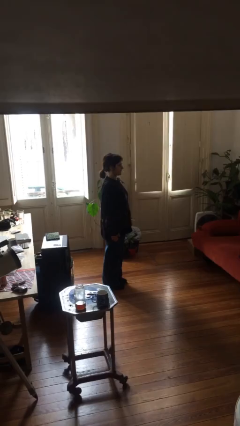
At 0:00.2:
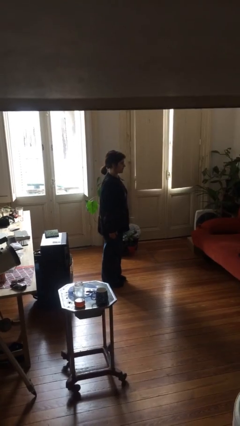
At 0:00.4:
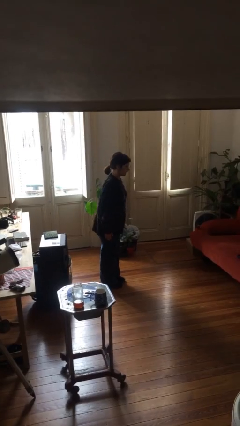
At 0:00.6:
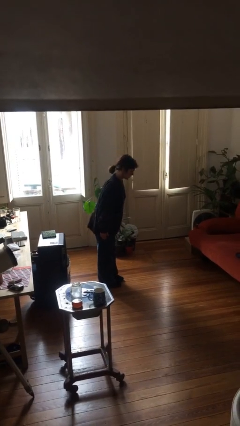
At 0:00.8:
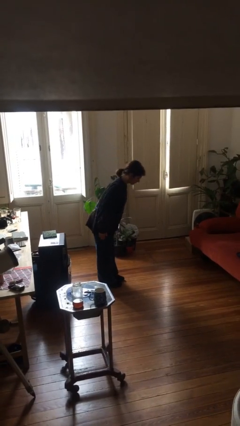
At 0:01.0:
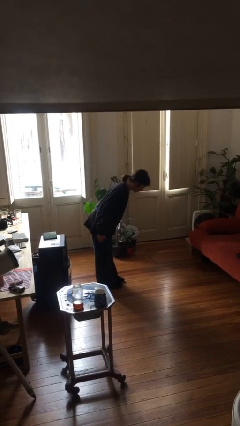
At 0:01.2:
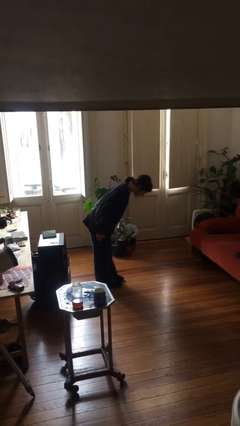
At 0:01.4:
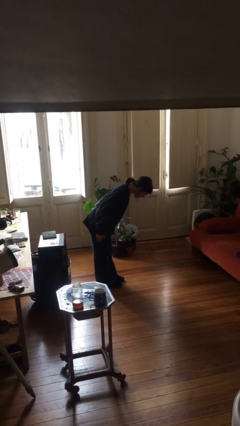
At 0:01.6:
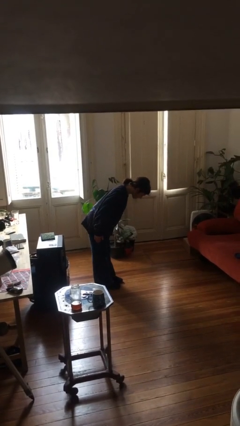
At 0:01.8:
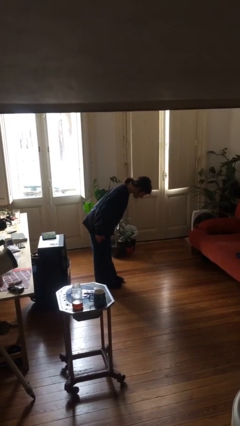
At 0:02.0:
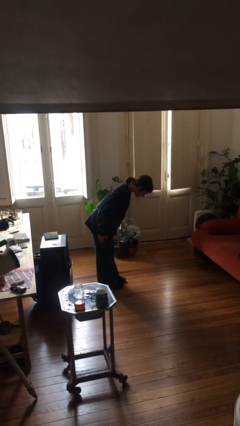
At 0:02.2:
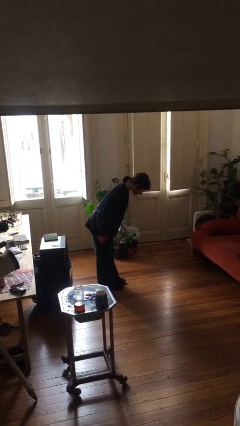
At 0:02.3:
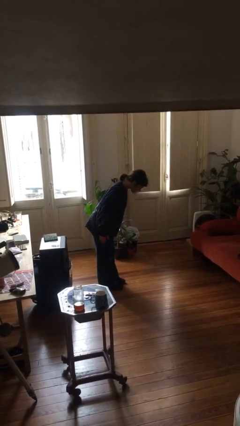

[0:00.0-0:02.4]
person bows

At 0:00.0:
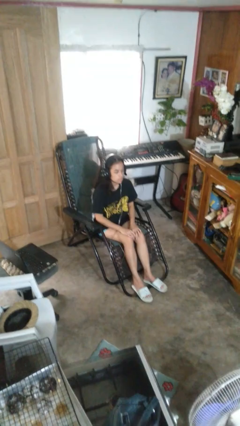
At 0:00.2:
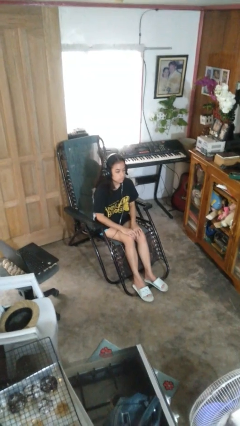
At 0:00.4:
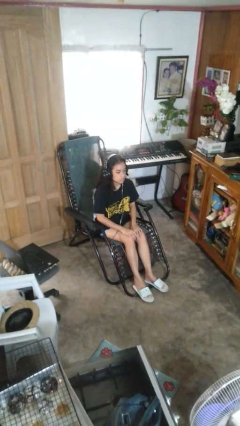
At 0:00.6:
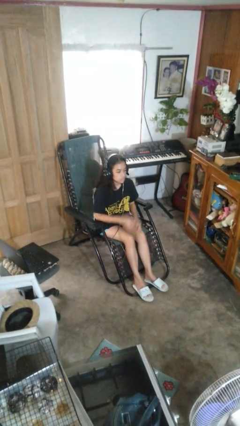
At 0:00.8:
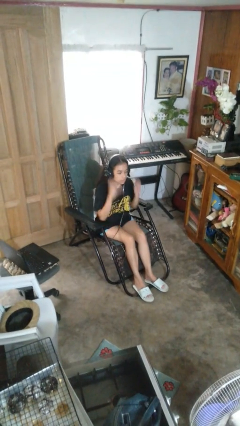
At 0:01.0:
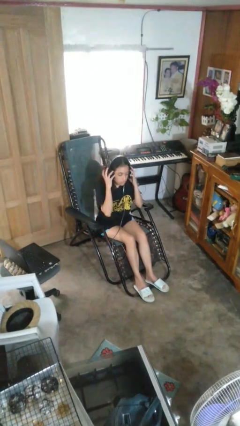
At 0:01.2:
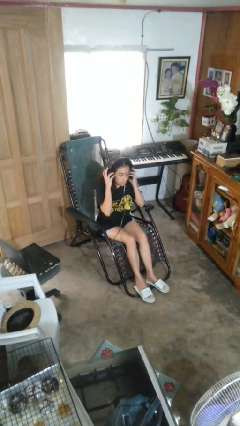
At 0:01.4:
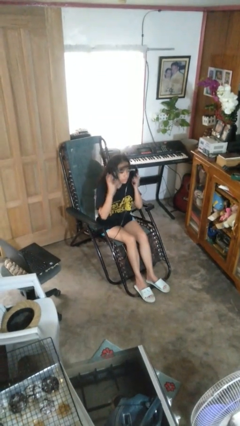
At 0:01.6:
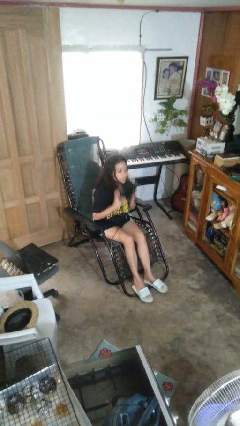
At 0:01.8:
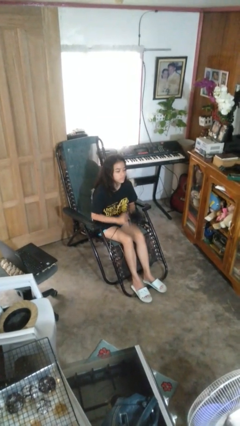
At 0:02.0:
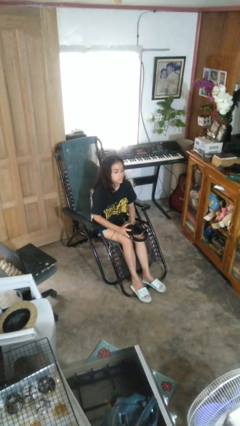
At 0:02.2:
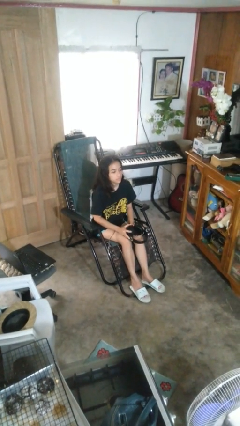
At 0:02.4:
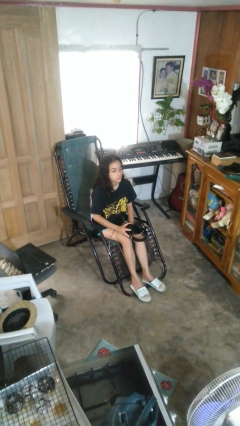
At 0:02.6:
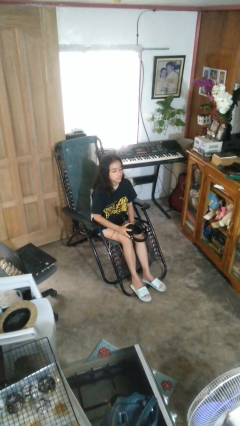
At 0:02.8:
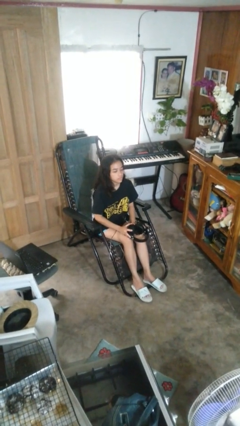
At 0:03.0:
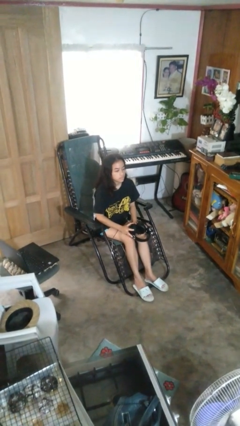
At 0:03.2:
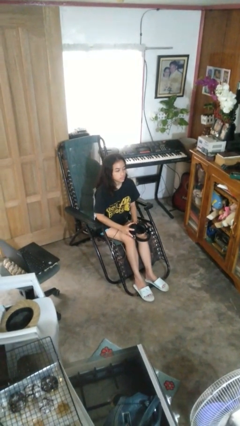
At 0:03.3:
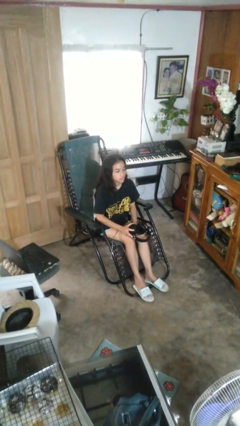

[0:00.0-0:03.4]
person takes off headphones

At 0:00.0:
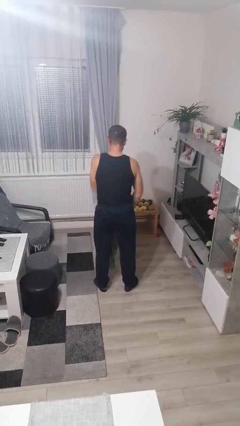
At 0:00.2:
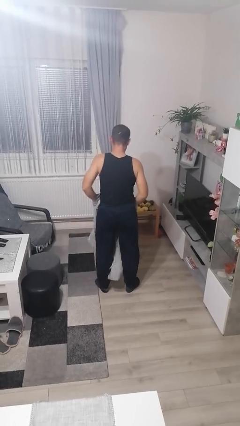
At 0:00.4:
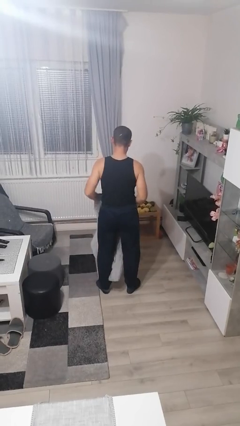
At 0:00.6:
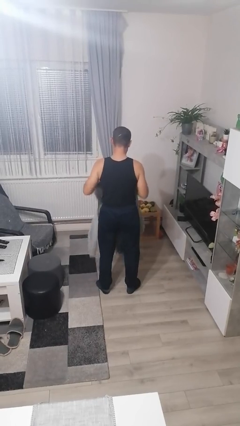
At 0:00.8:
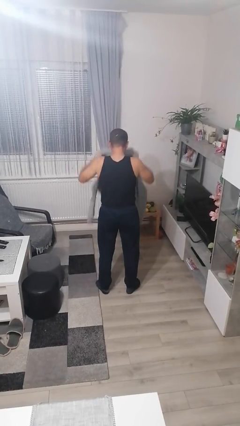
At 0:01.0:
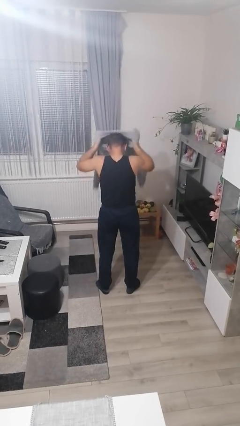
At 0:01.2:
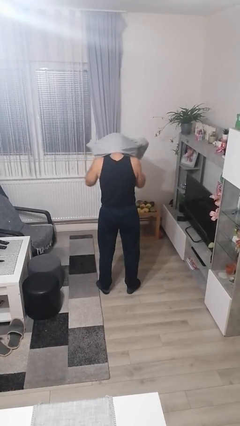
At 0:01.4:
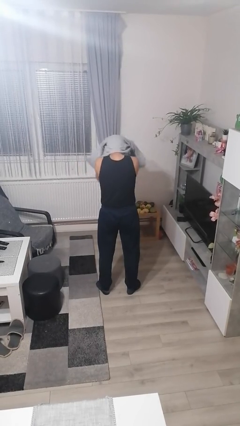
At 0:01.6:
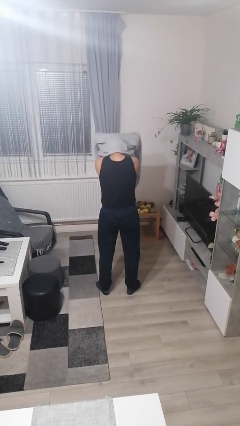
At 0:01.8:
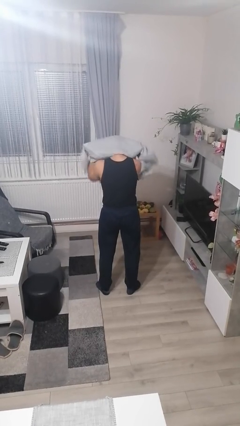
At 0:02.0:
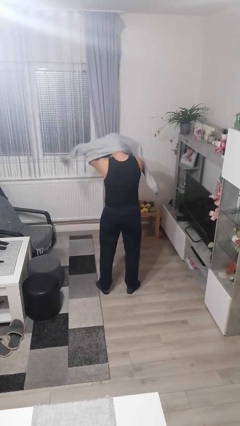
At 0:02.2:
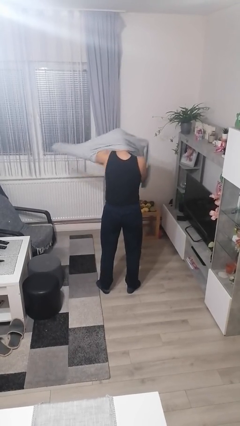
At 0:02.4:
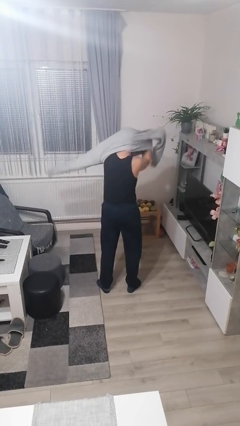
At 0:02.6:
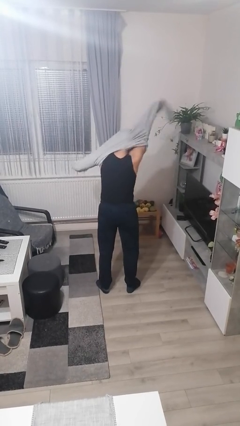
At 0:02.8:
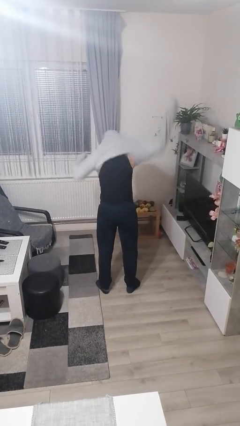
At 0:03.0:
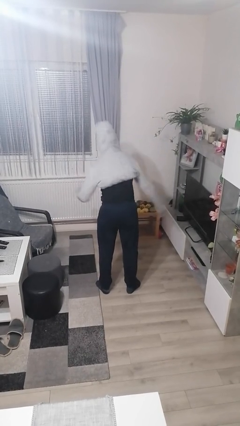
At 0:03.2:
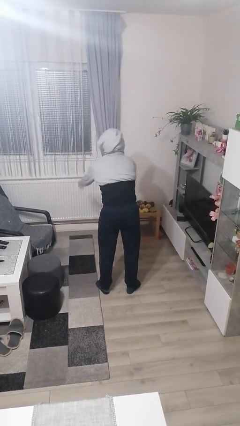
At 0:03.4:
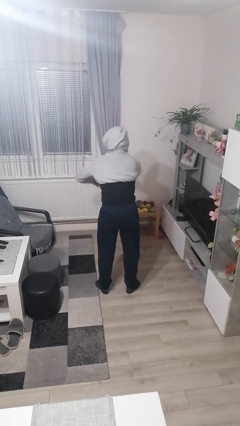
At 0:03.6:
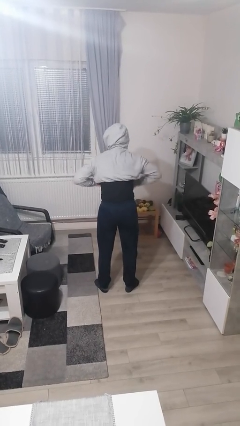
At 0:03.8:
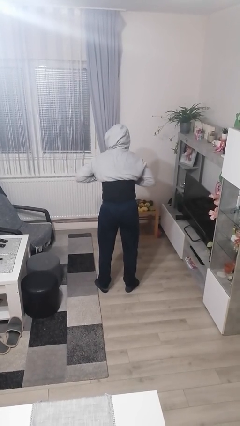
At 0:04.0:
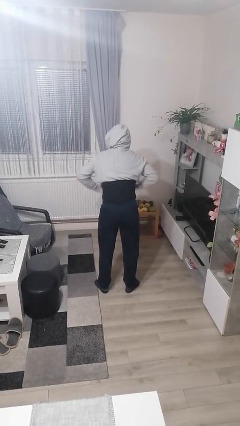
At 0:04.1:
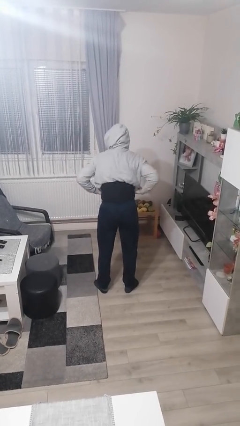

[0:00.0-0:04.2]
person puts on hoodie

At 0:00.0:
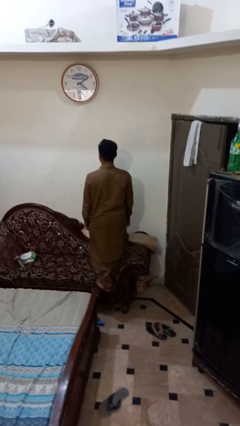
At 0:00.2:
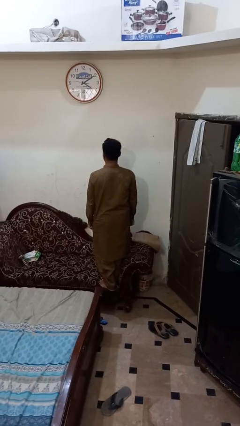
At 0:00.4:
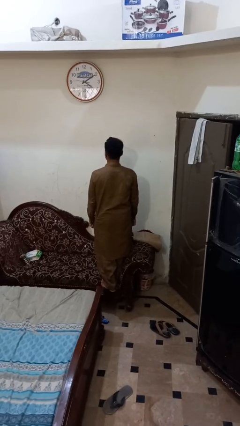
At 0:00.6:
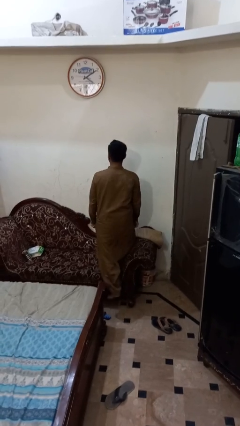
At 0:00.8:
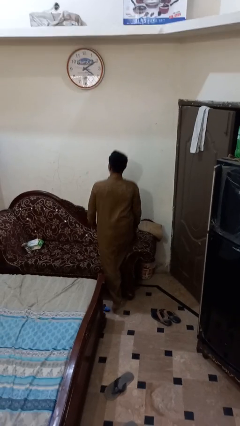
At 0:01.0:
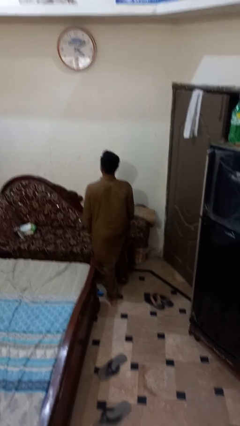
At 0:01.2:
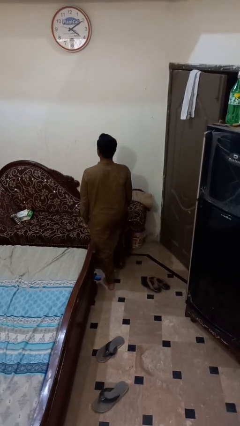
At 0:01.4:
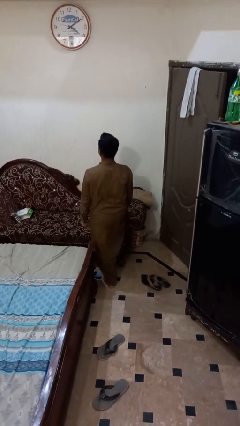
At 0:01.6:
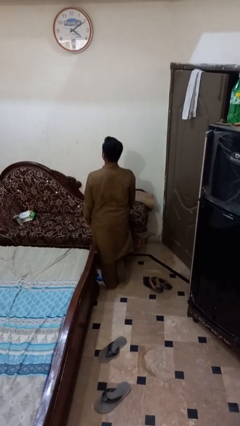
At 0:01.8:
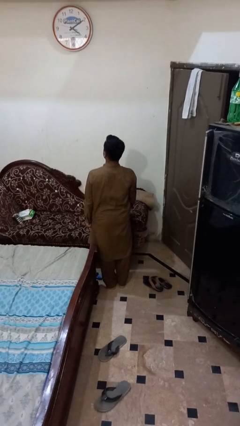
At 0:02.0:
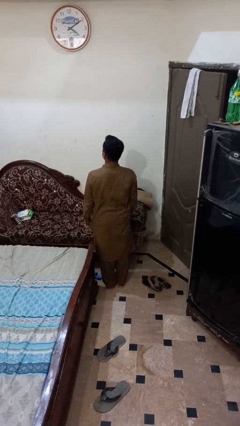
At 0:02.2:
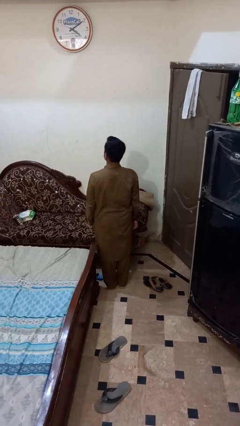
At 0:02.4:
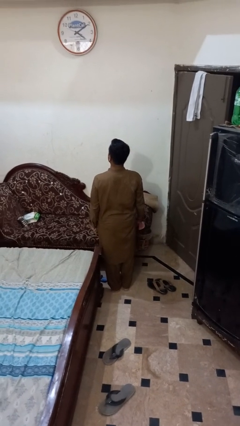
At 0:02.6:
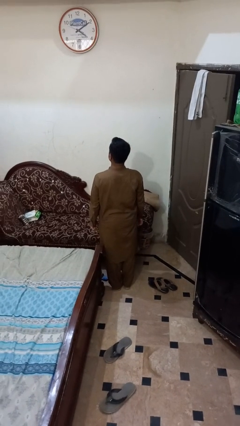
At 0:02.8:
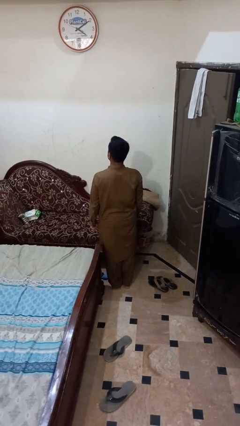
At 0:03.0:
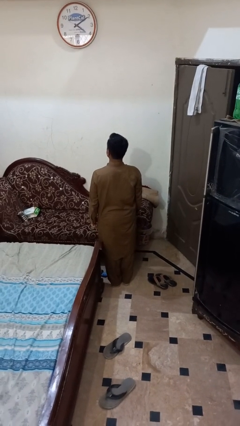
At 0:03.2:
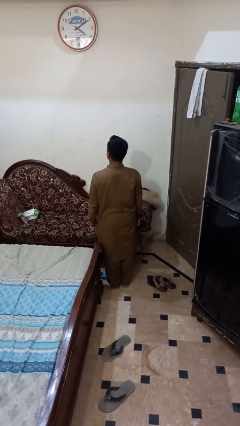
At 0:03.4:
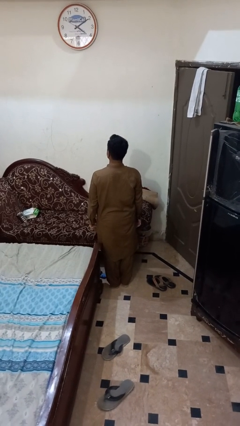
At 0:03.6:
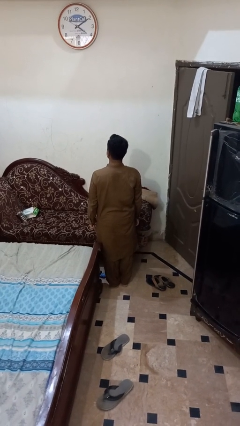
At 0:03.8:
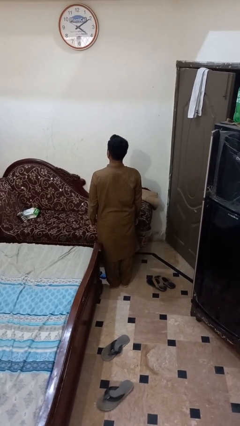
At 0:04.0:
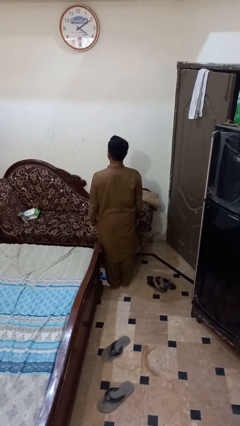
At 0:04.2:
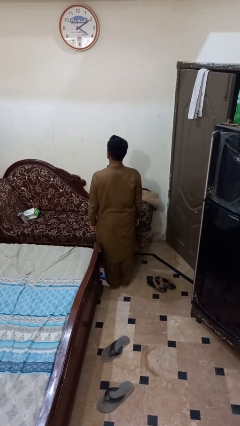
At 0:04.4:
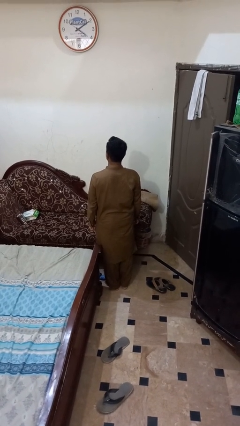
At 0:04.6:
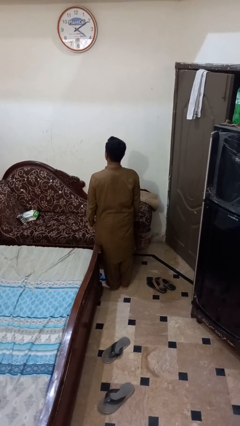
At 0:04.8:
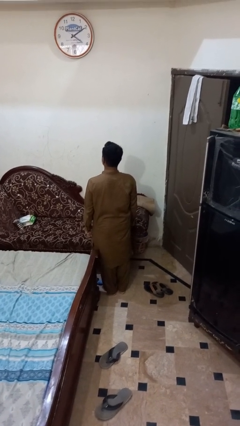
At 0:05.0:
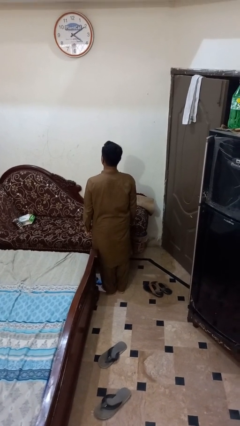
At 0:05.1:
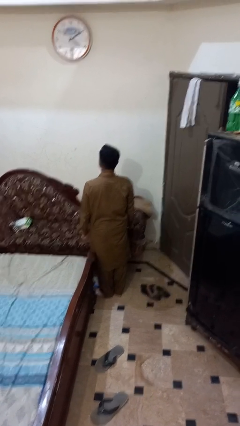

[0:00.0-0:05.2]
person climbs off couch

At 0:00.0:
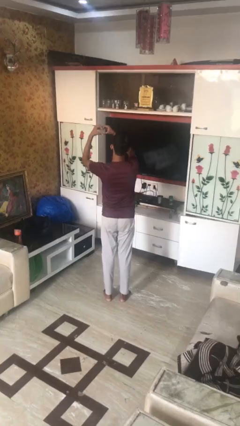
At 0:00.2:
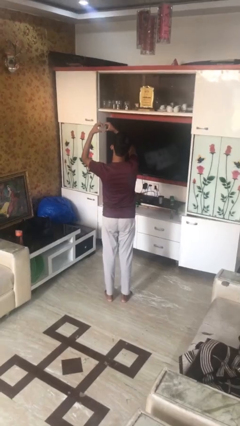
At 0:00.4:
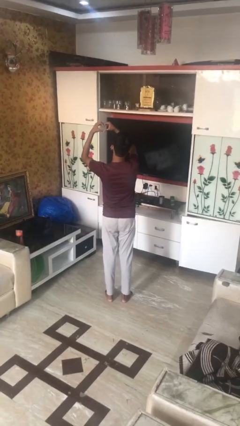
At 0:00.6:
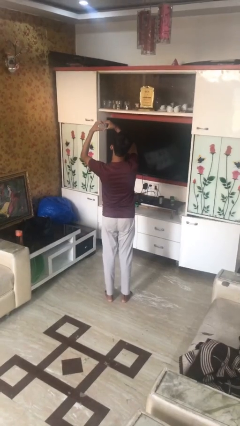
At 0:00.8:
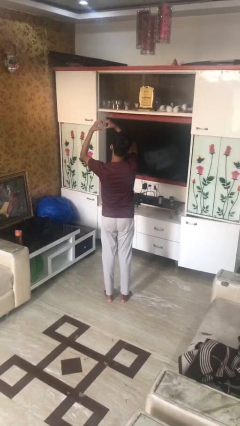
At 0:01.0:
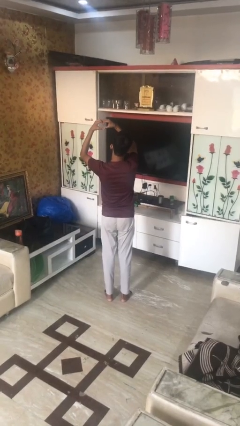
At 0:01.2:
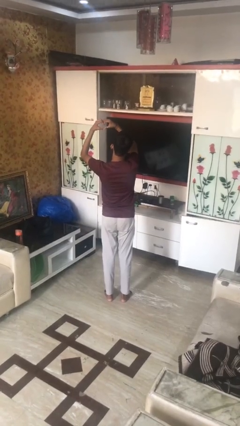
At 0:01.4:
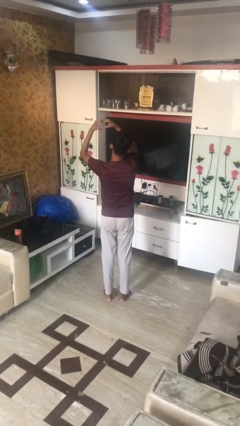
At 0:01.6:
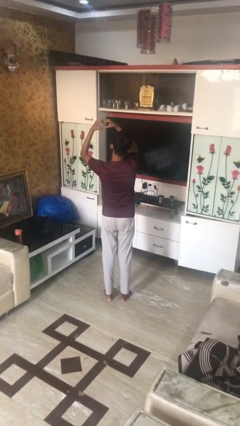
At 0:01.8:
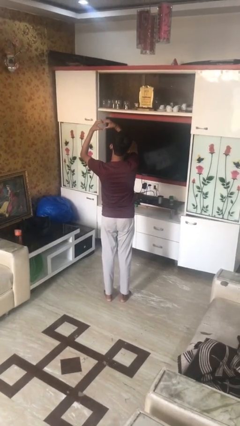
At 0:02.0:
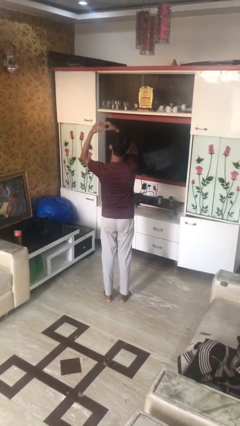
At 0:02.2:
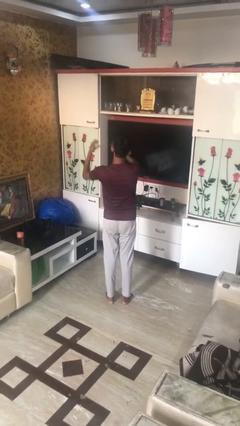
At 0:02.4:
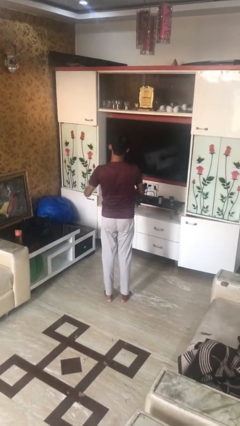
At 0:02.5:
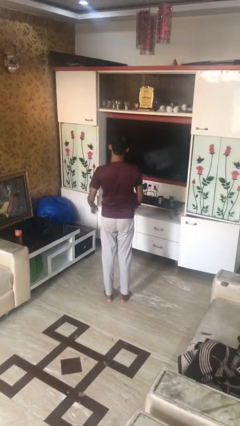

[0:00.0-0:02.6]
person gestures heart
